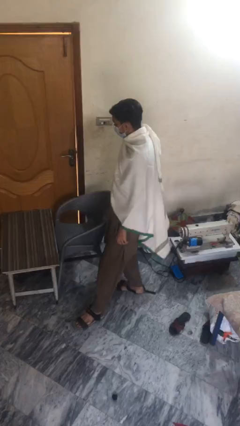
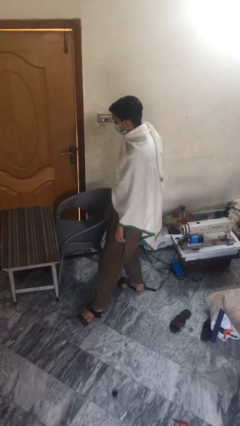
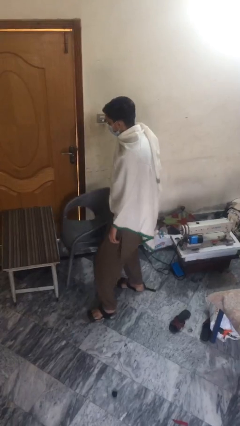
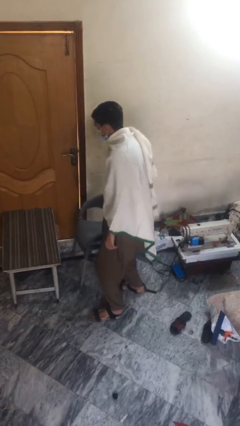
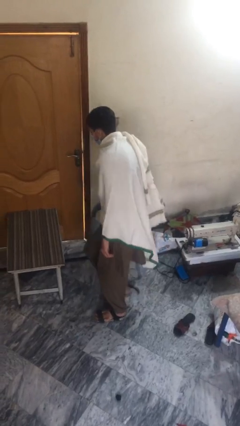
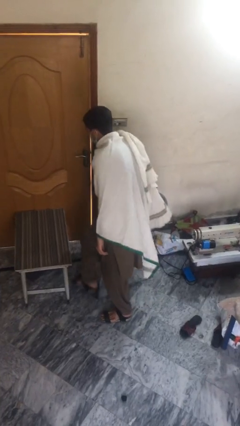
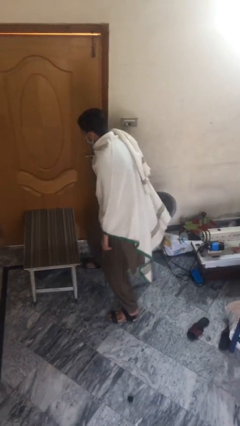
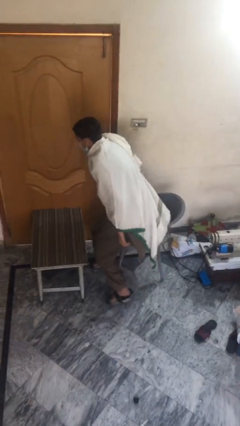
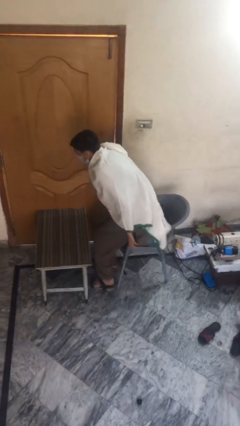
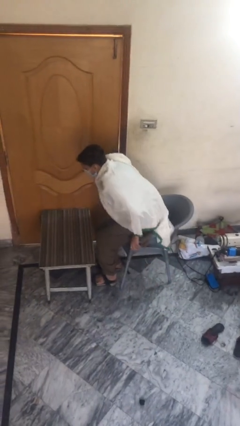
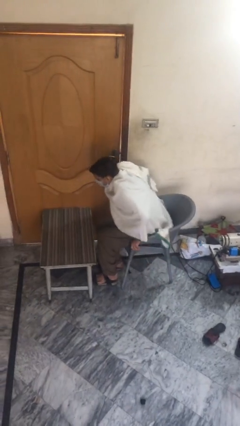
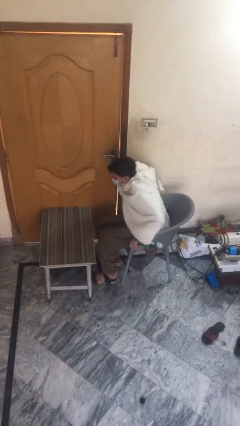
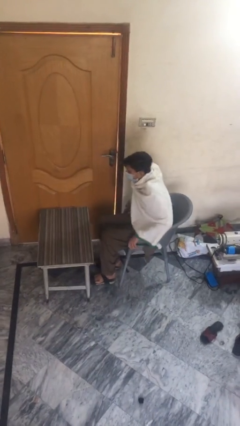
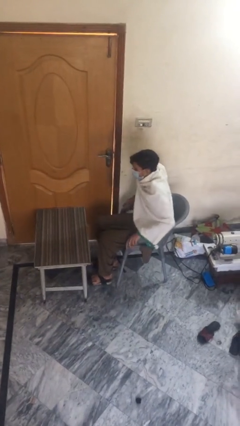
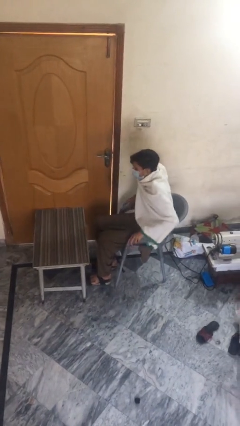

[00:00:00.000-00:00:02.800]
person sits down

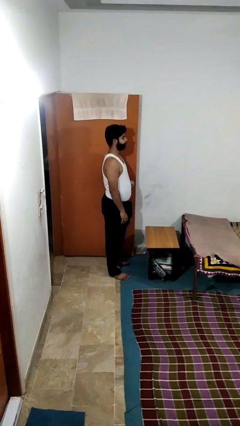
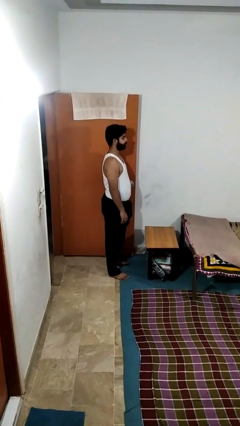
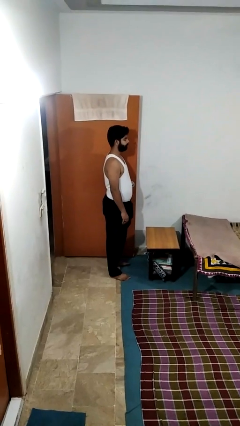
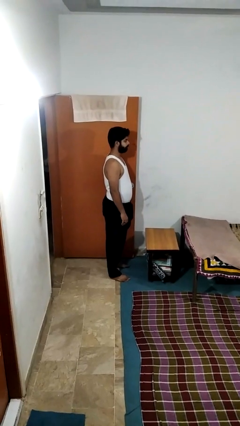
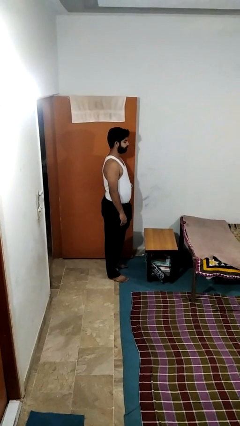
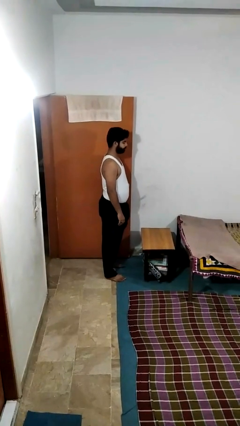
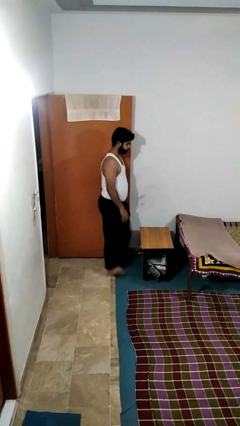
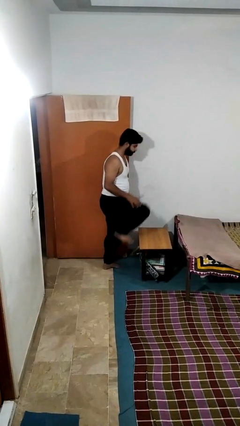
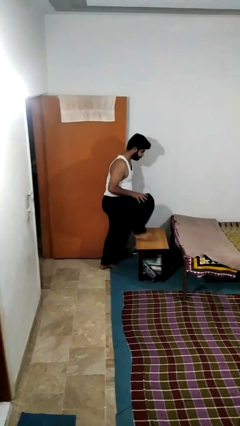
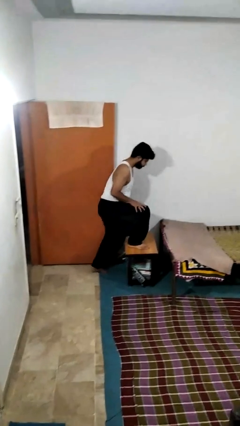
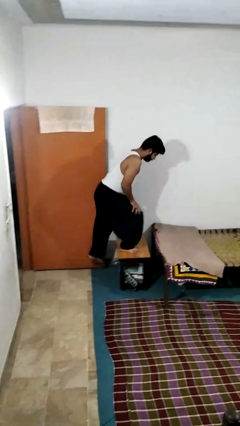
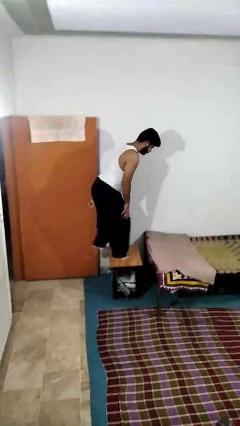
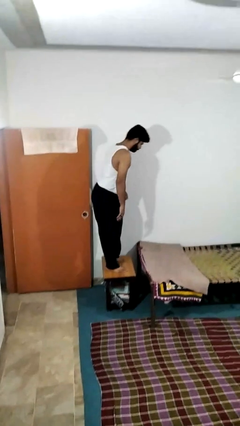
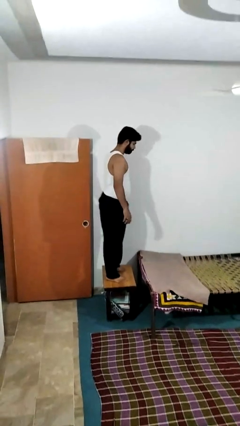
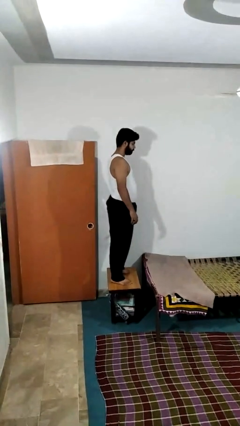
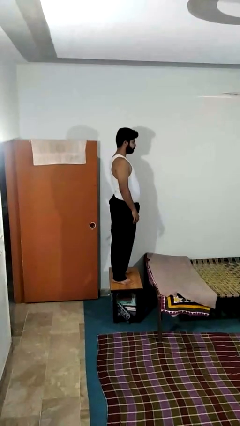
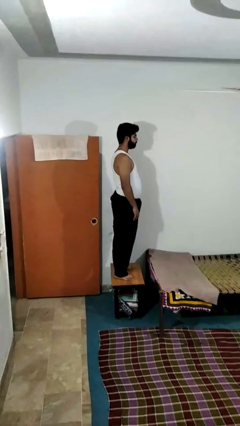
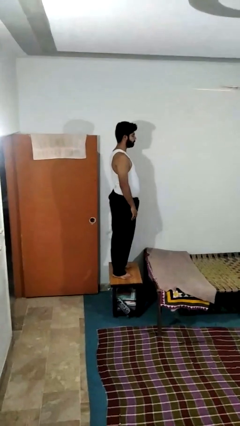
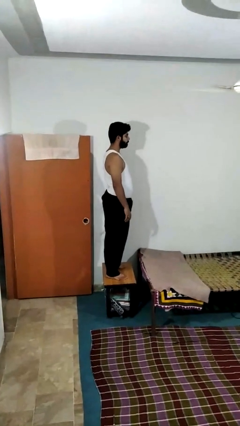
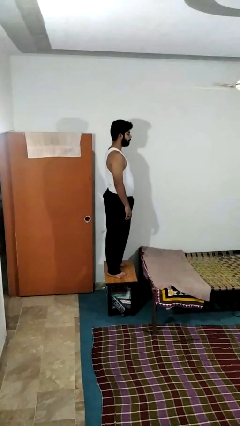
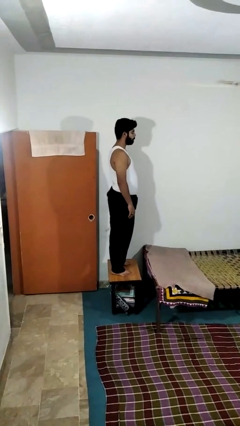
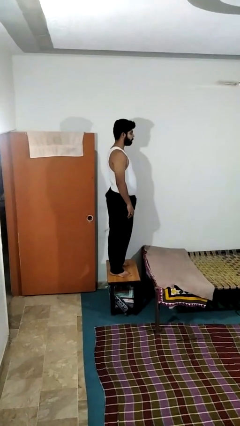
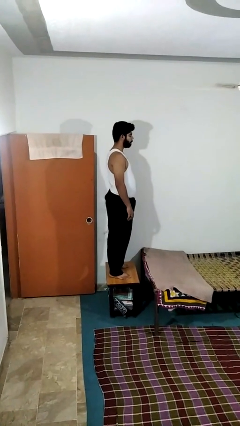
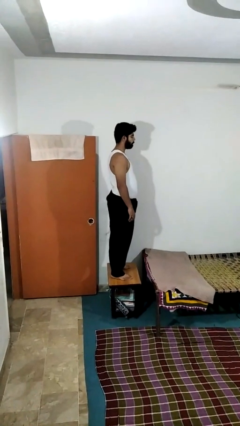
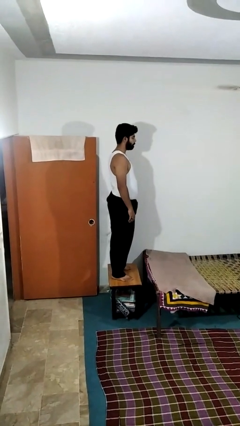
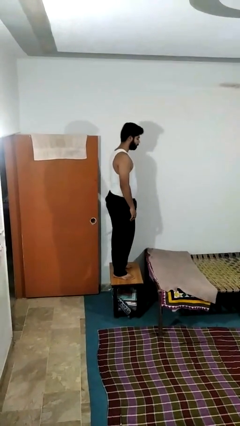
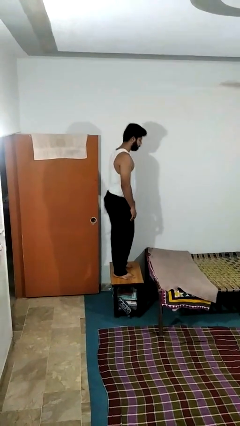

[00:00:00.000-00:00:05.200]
person climbs on table

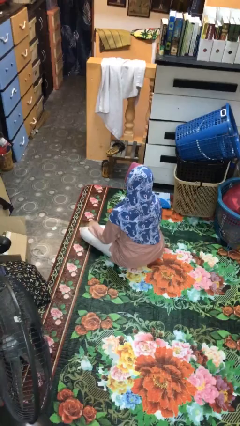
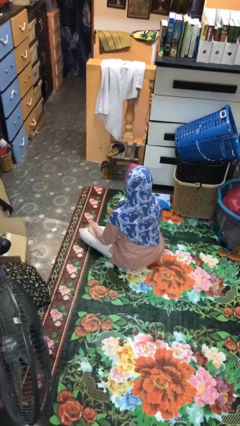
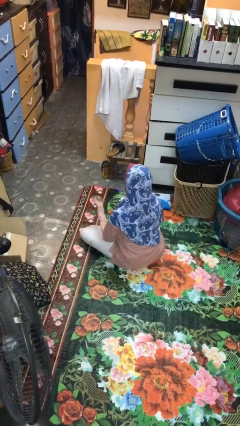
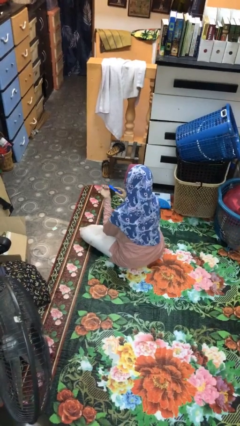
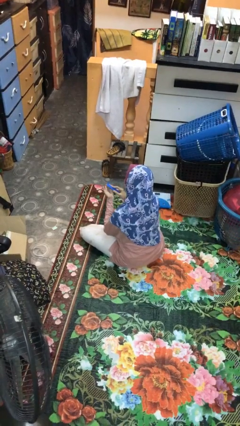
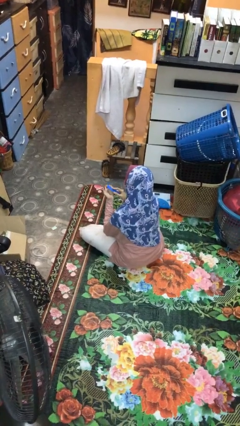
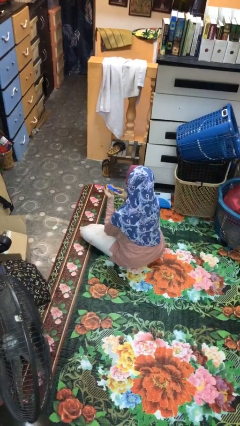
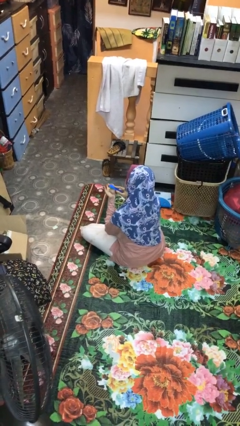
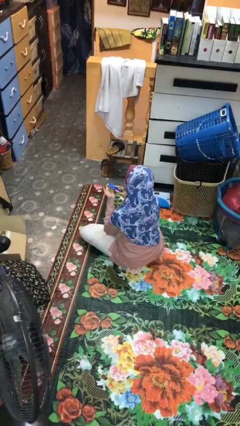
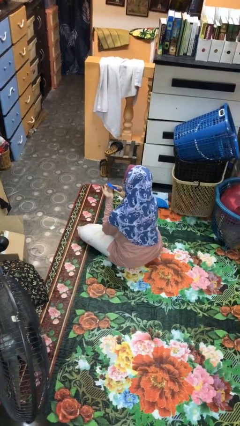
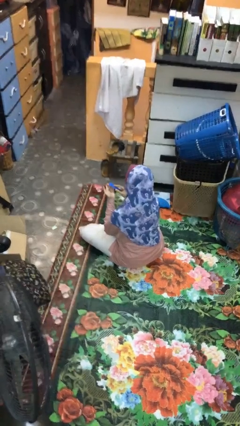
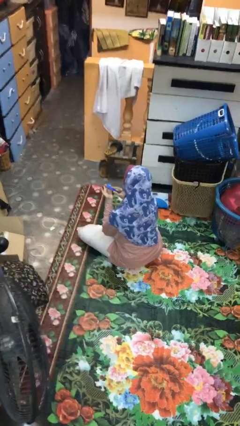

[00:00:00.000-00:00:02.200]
person files fingernails

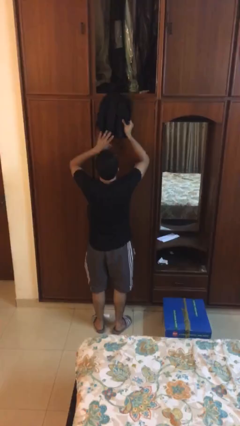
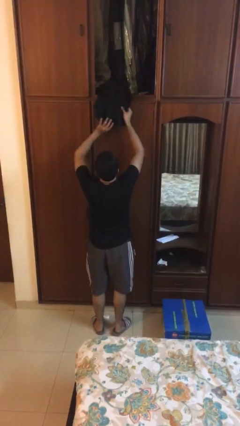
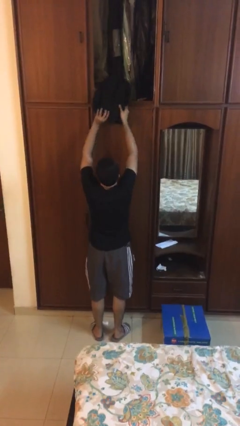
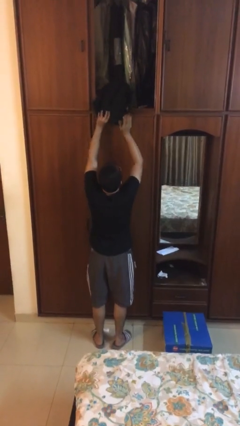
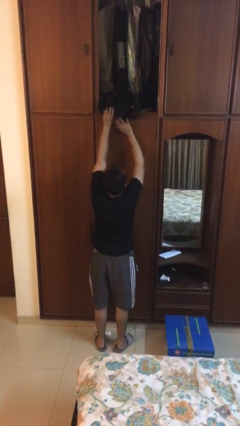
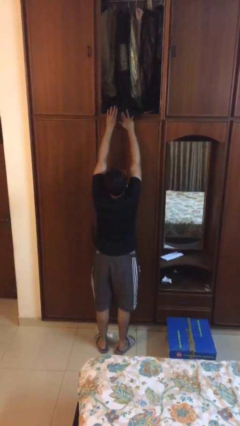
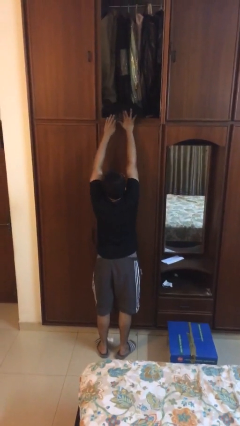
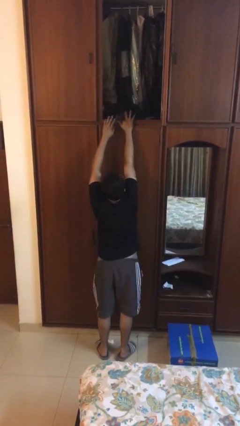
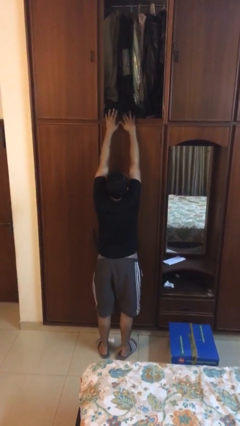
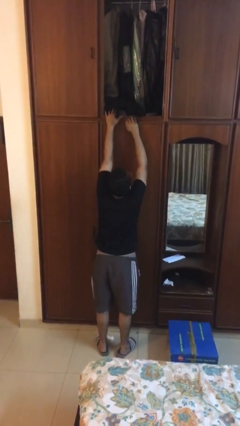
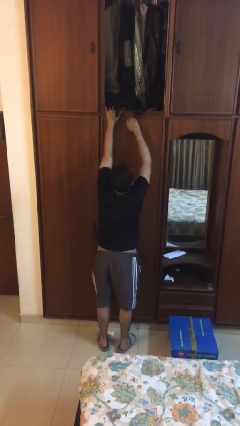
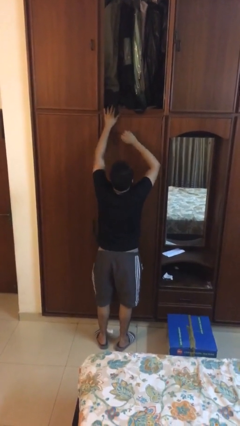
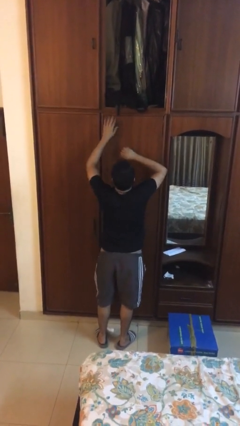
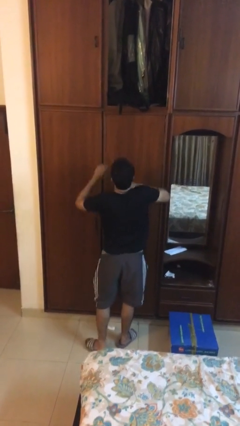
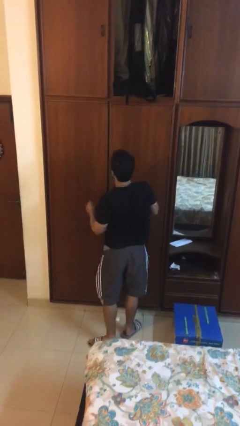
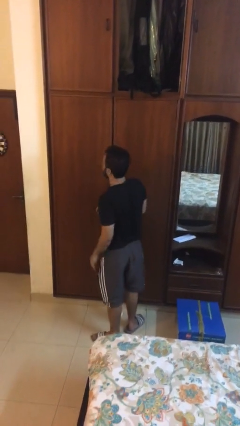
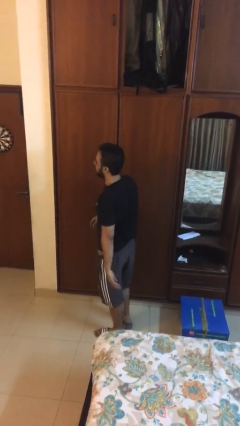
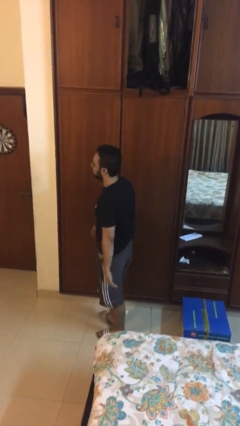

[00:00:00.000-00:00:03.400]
person puts down object on shelf

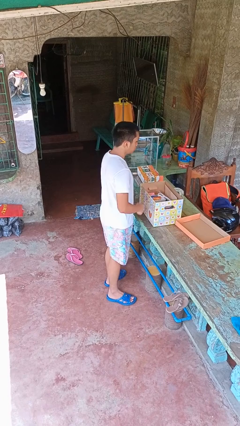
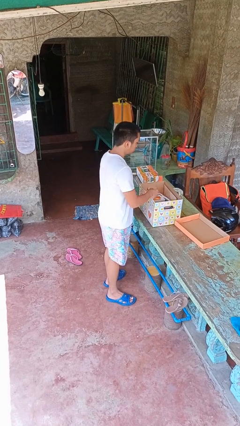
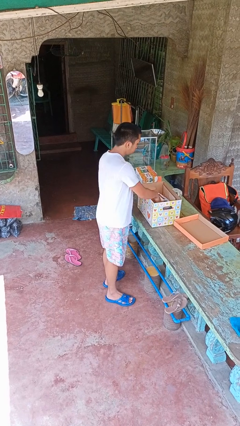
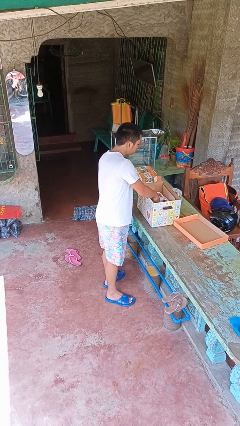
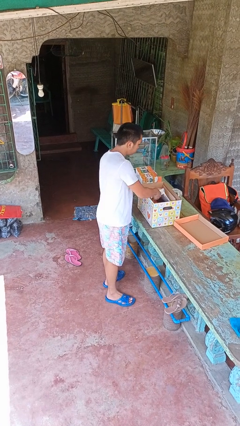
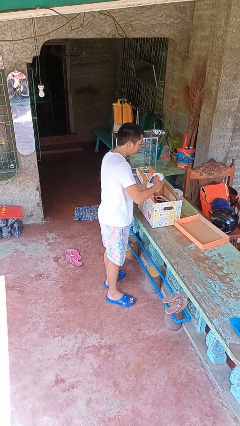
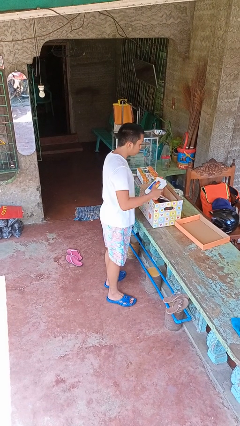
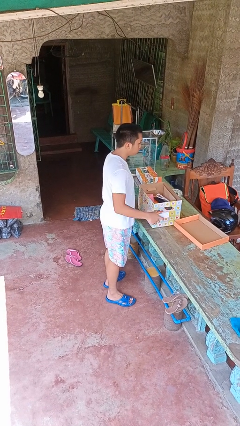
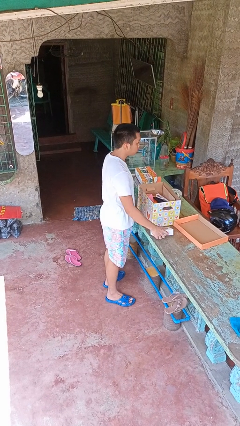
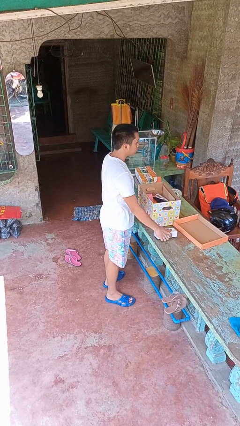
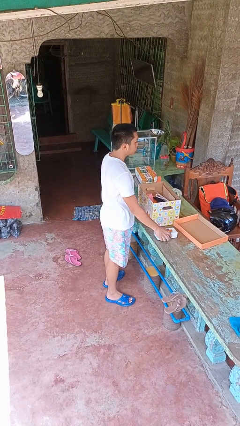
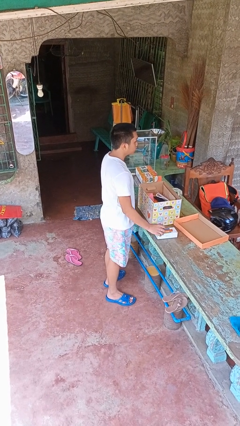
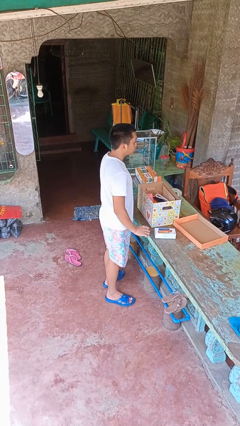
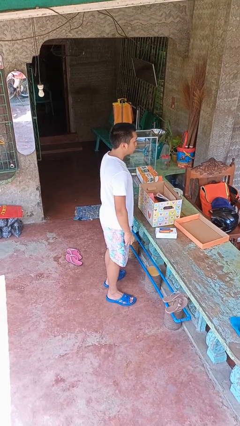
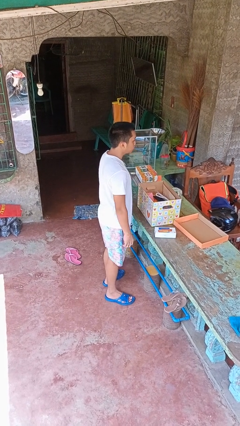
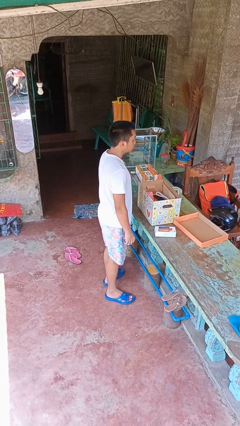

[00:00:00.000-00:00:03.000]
person takes object from box

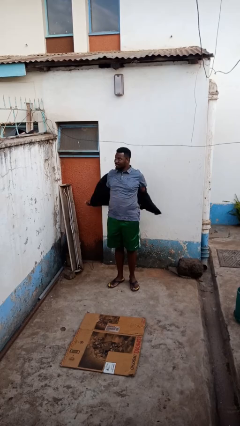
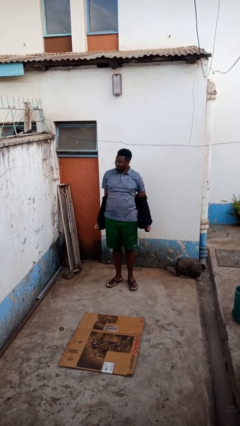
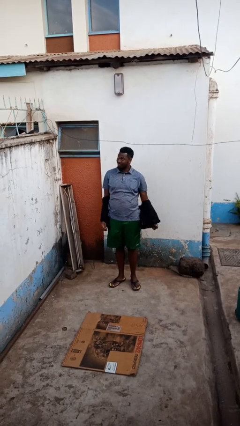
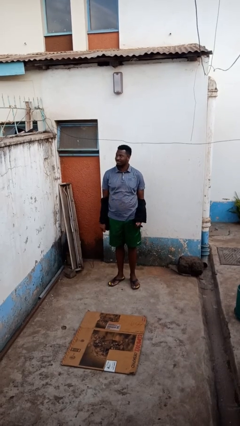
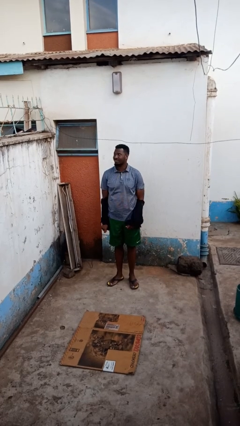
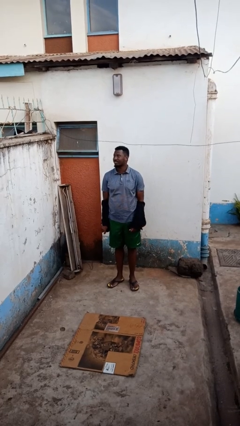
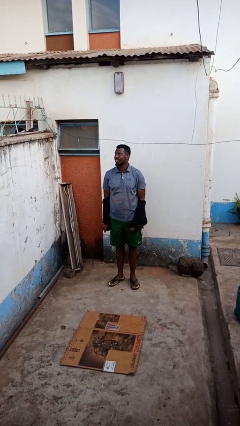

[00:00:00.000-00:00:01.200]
person takes off jacket
